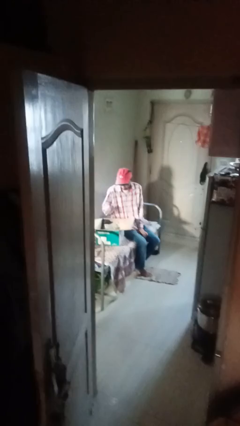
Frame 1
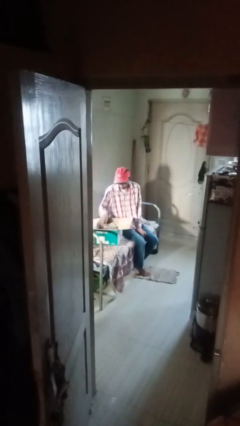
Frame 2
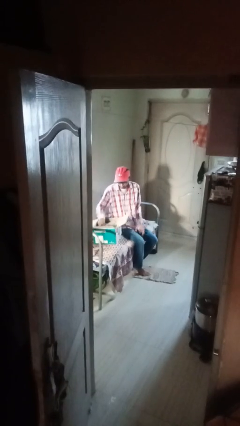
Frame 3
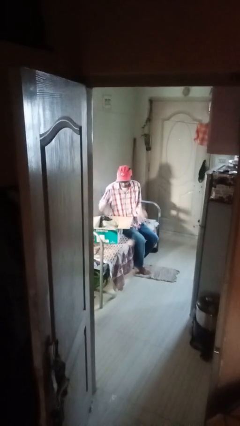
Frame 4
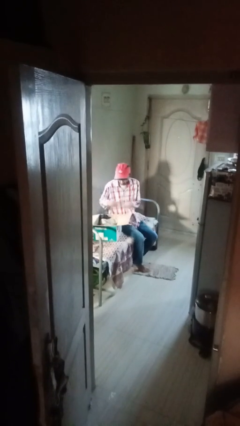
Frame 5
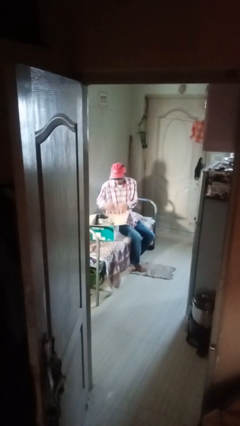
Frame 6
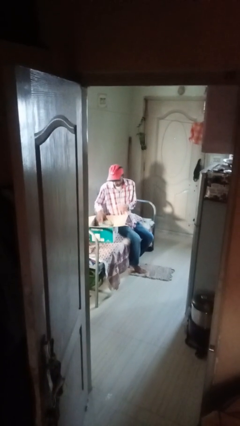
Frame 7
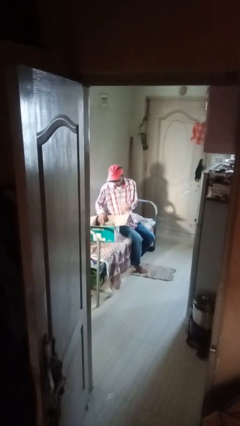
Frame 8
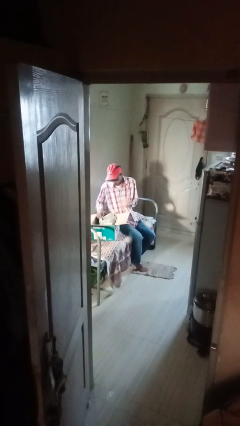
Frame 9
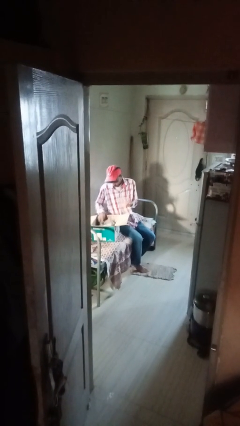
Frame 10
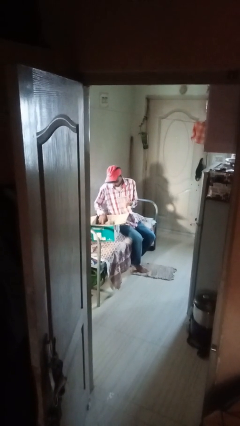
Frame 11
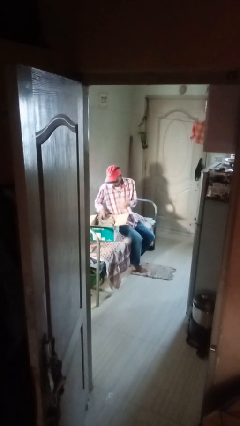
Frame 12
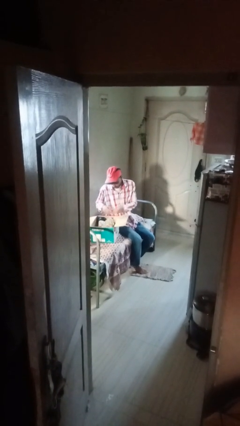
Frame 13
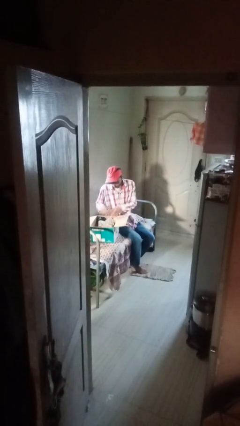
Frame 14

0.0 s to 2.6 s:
person searches in box

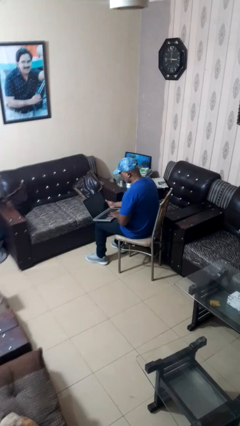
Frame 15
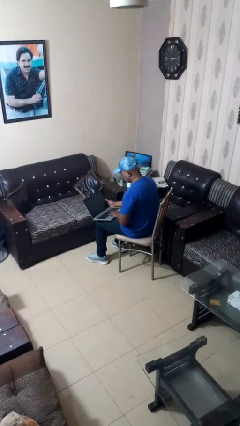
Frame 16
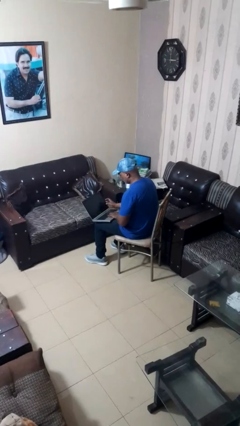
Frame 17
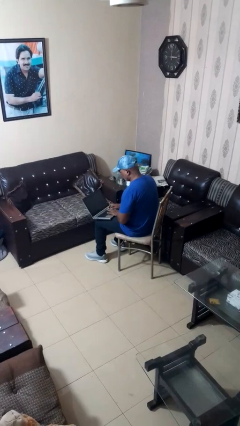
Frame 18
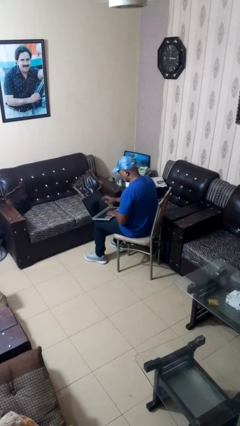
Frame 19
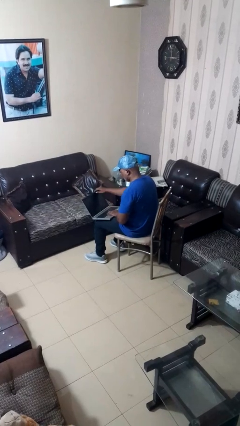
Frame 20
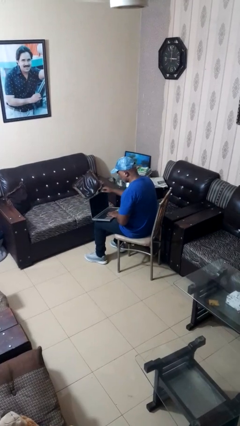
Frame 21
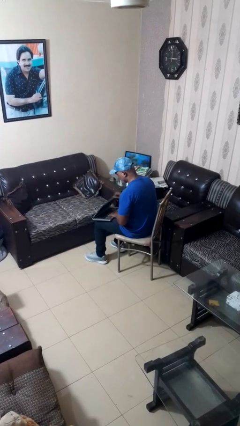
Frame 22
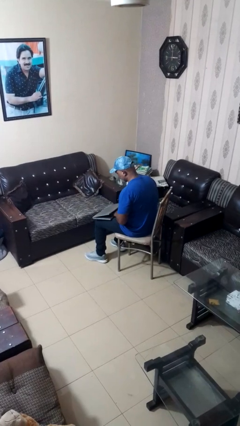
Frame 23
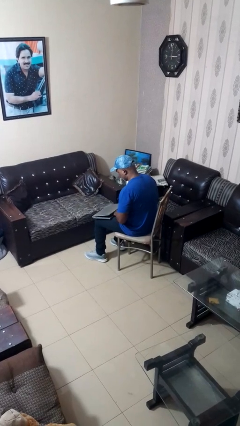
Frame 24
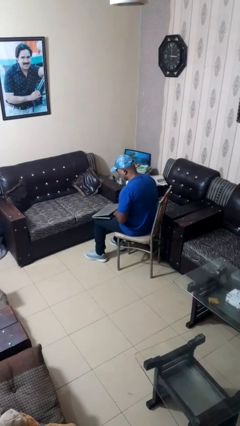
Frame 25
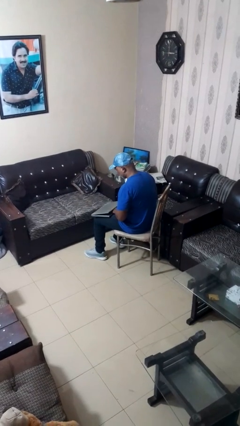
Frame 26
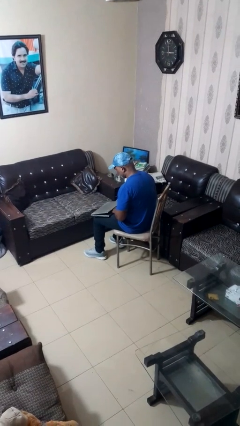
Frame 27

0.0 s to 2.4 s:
person closes laptop

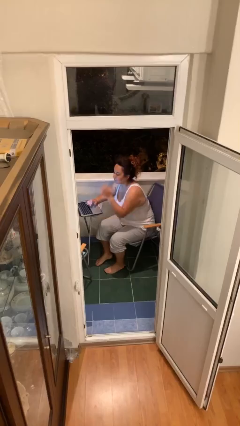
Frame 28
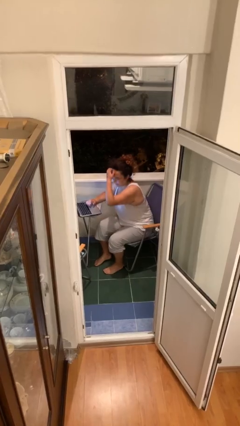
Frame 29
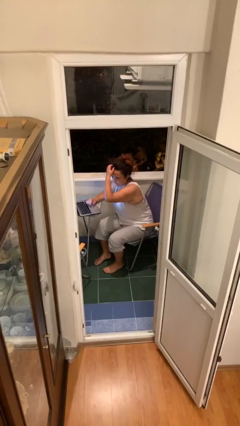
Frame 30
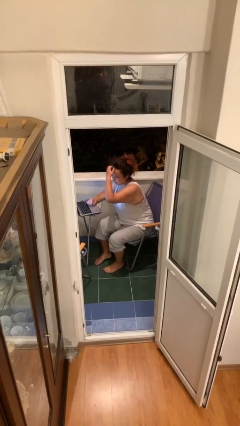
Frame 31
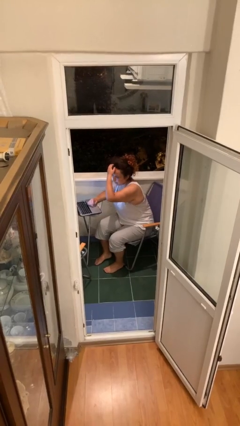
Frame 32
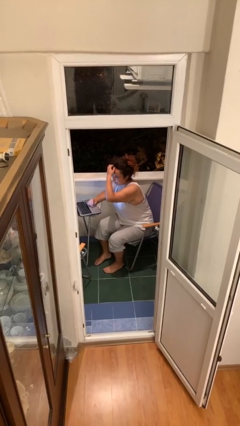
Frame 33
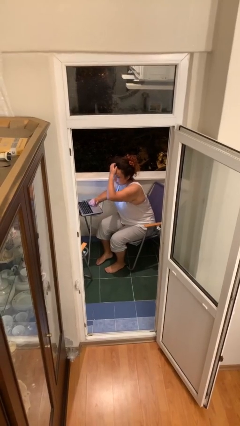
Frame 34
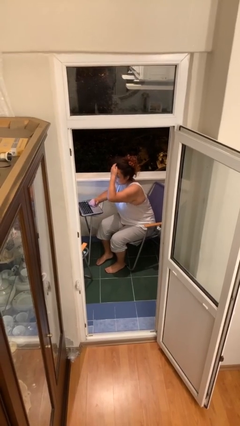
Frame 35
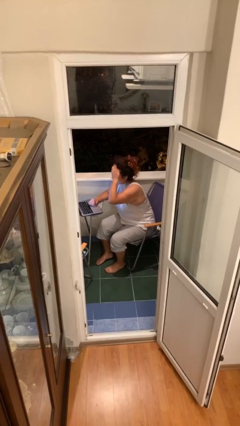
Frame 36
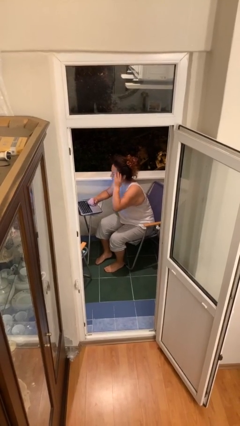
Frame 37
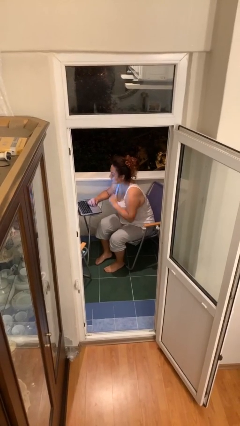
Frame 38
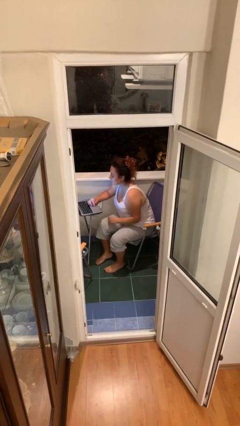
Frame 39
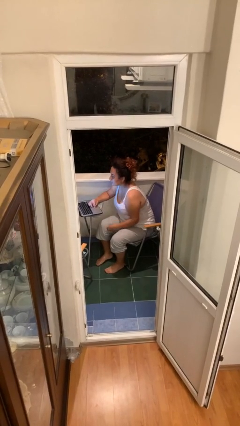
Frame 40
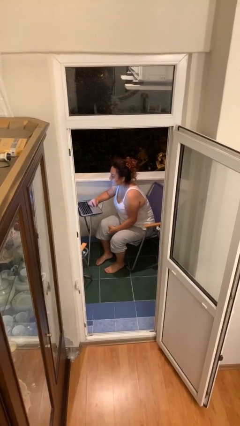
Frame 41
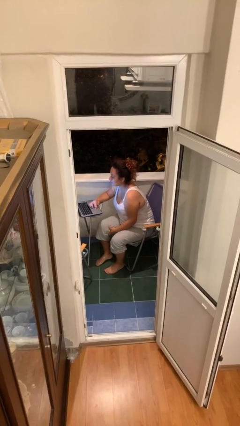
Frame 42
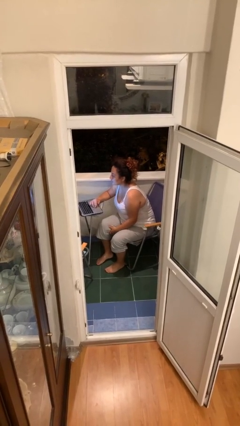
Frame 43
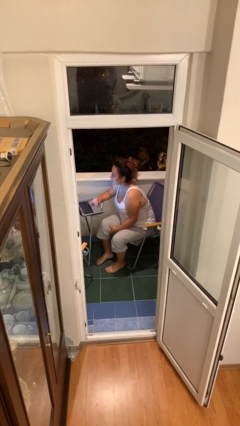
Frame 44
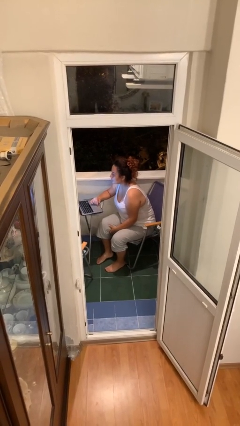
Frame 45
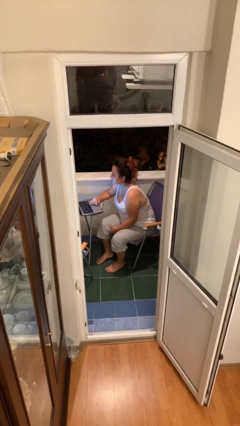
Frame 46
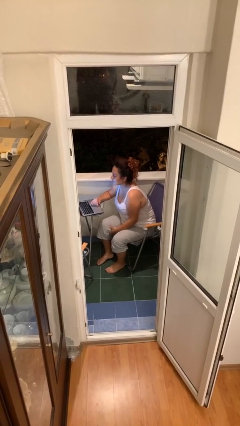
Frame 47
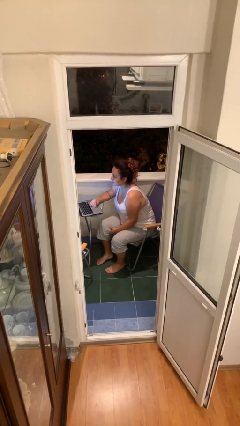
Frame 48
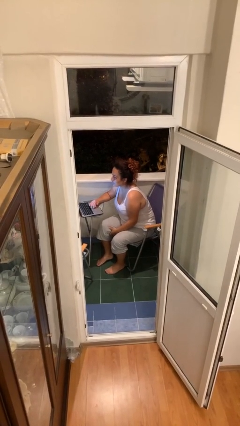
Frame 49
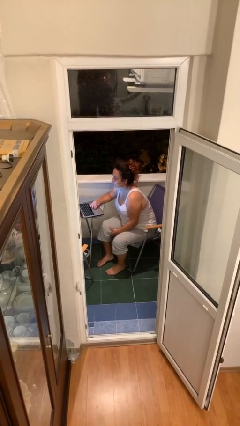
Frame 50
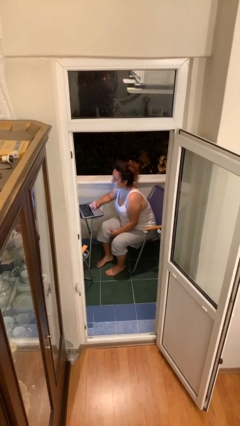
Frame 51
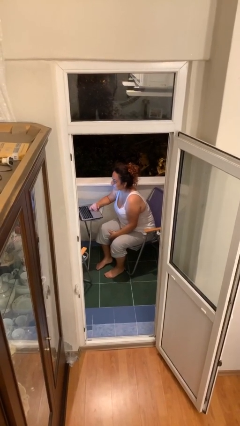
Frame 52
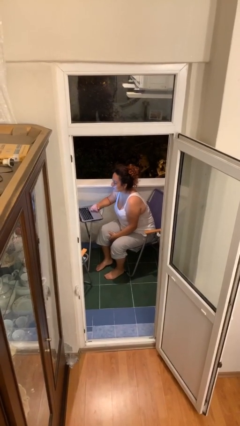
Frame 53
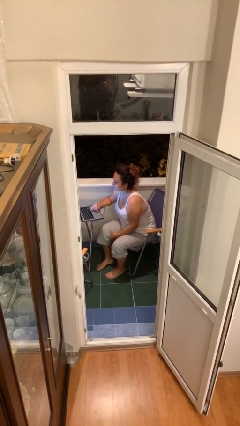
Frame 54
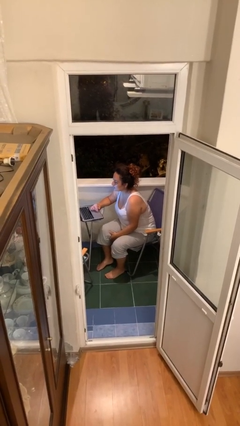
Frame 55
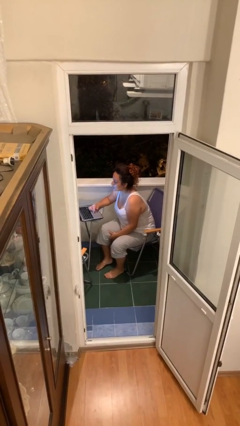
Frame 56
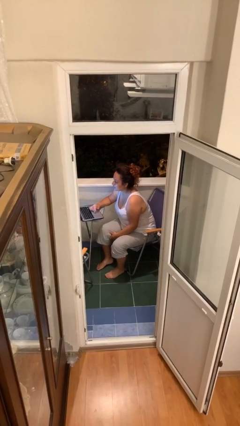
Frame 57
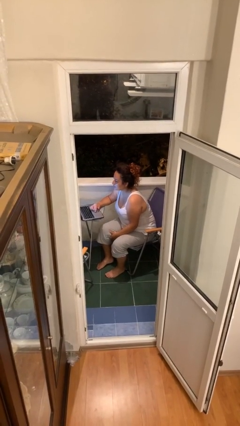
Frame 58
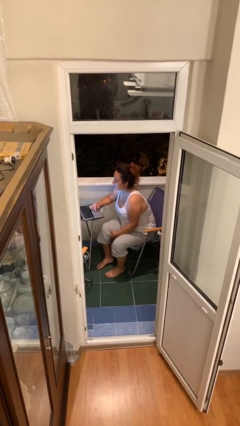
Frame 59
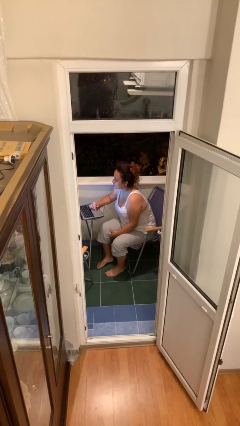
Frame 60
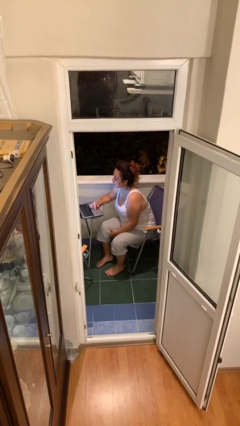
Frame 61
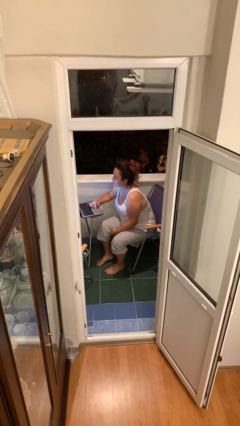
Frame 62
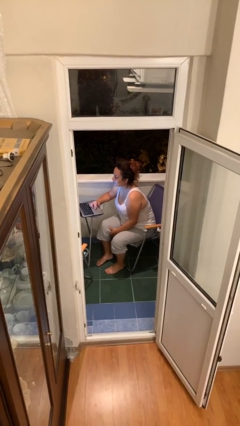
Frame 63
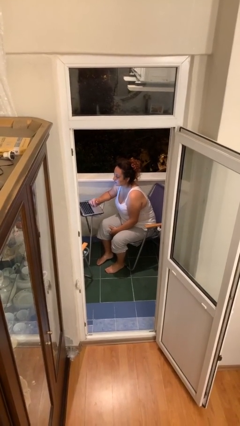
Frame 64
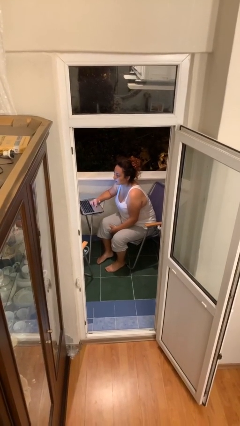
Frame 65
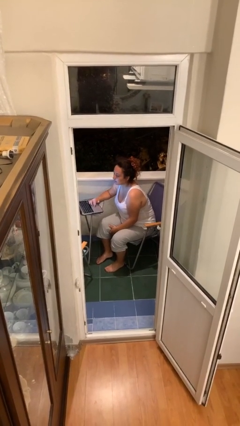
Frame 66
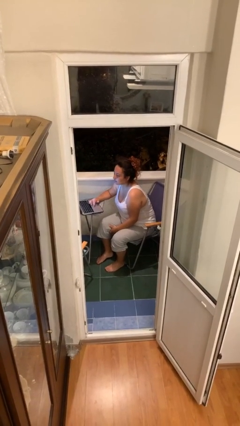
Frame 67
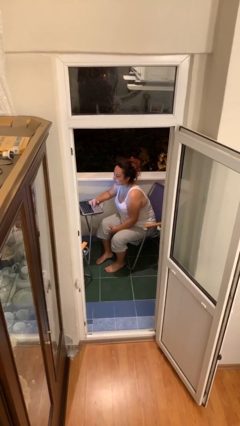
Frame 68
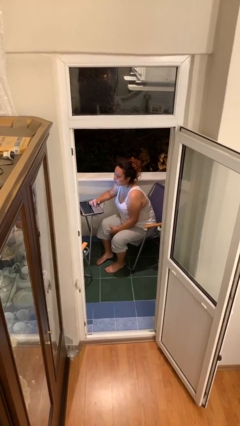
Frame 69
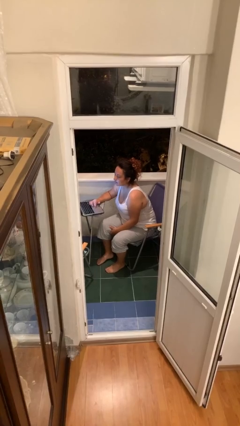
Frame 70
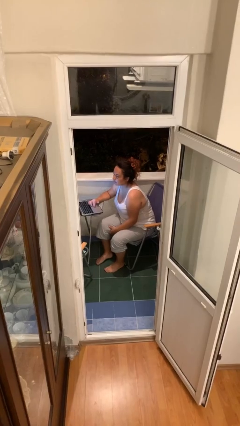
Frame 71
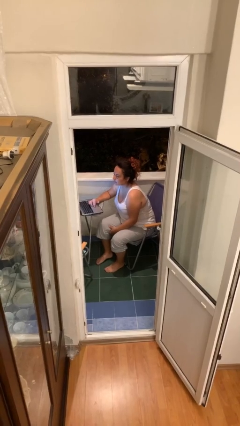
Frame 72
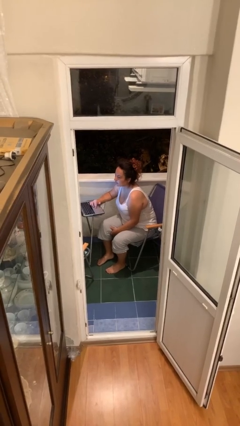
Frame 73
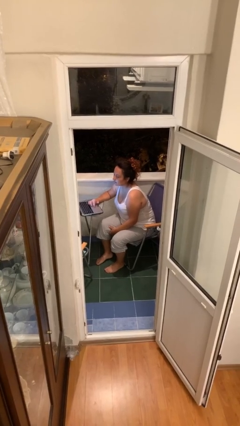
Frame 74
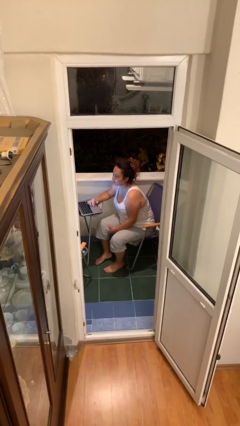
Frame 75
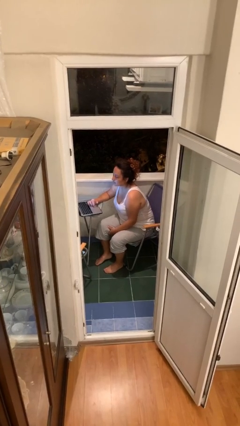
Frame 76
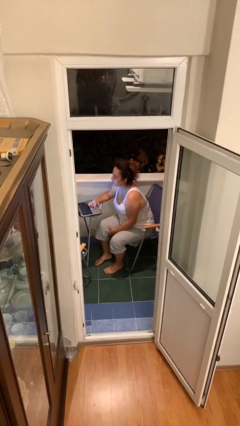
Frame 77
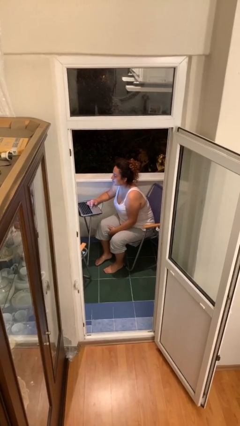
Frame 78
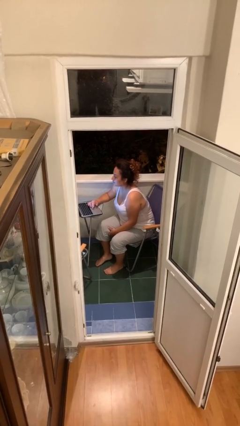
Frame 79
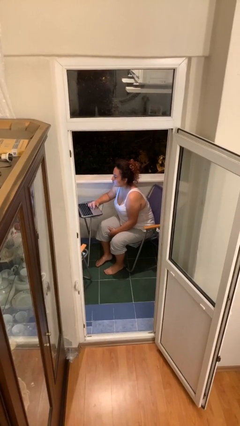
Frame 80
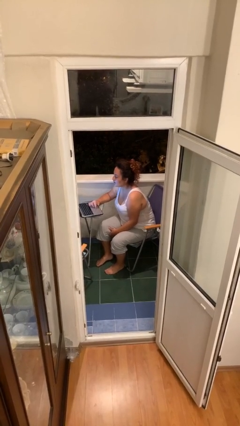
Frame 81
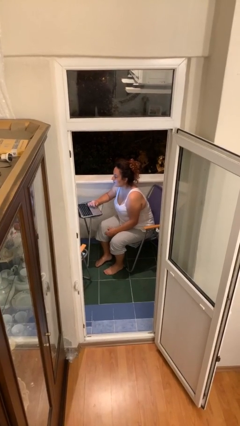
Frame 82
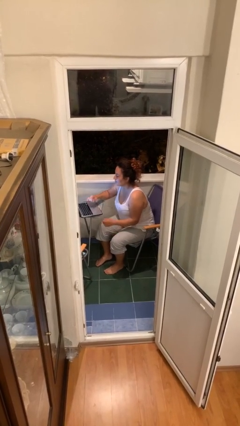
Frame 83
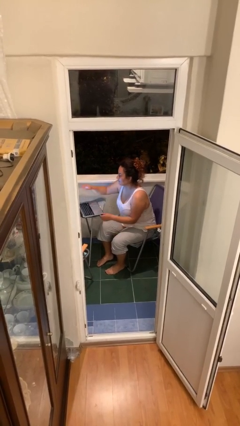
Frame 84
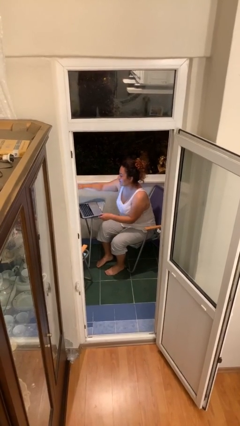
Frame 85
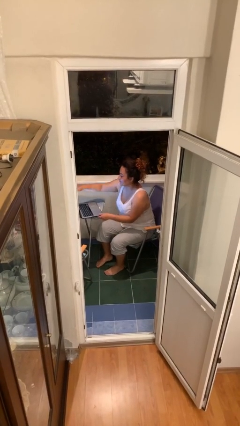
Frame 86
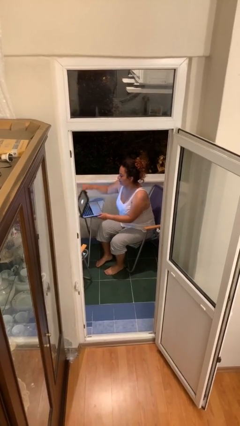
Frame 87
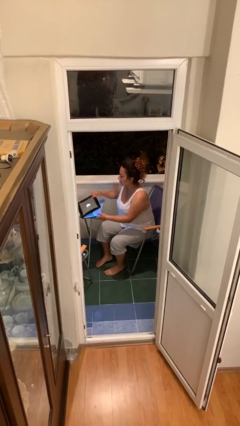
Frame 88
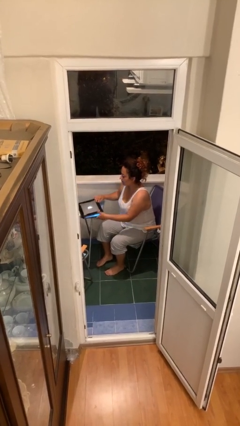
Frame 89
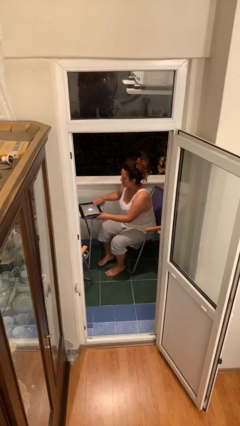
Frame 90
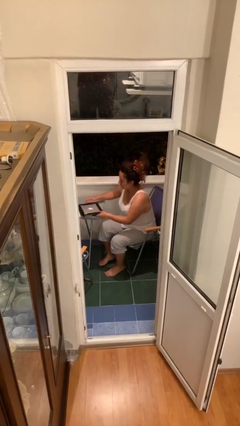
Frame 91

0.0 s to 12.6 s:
person interacts with laptop

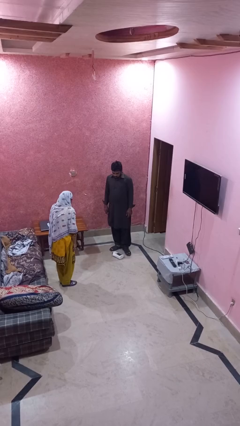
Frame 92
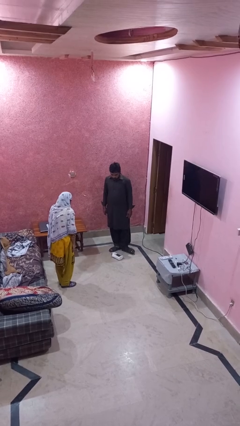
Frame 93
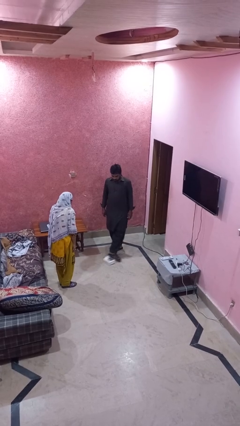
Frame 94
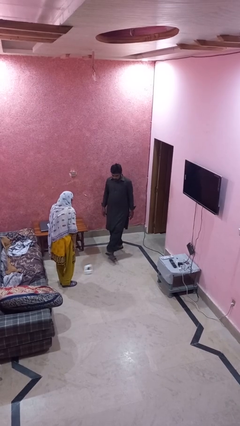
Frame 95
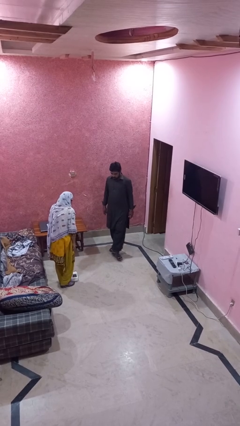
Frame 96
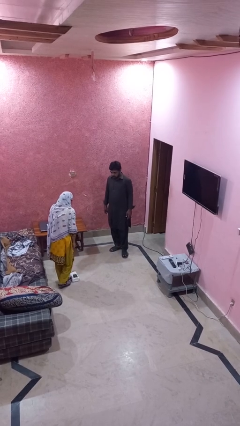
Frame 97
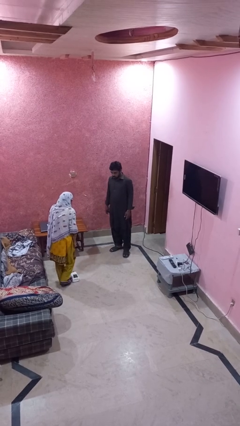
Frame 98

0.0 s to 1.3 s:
person kicks object to person
